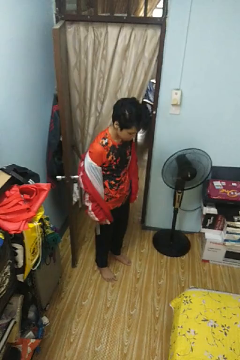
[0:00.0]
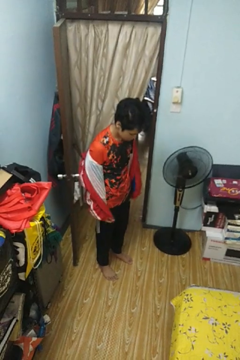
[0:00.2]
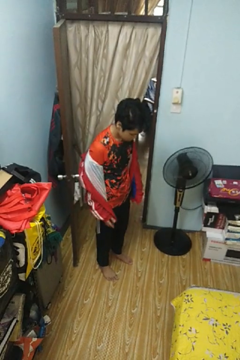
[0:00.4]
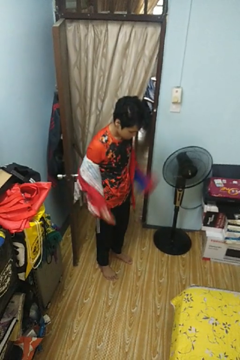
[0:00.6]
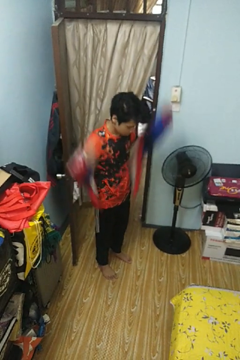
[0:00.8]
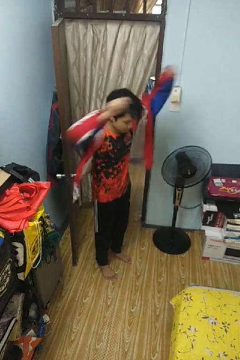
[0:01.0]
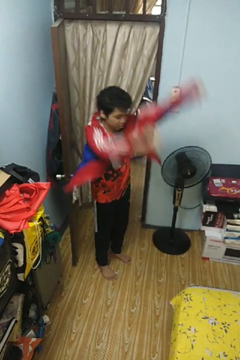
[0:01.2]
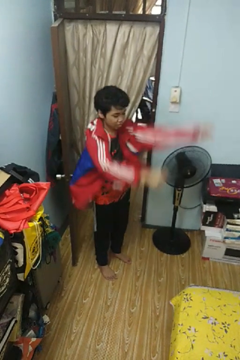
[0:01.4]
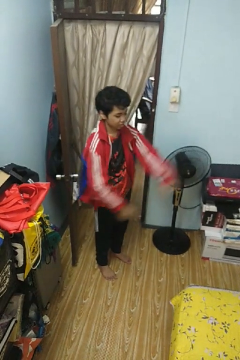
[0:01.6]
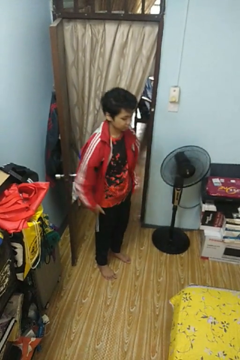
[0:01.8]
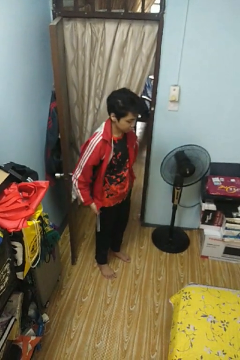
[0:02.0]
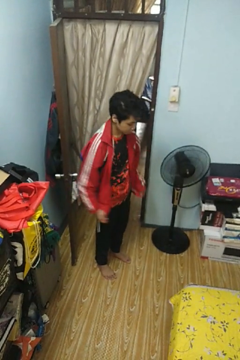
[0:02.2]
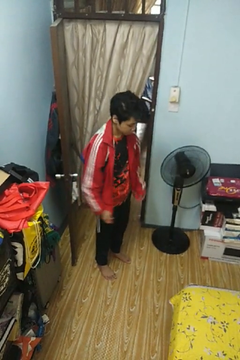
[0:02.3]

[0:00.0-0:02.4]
person puts on jacket

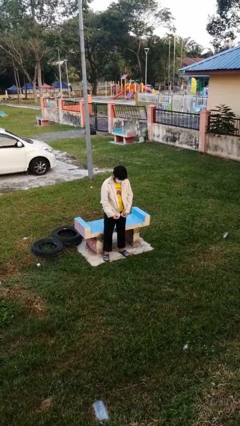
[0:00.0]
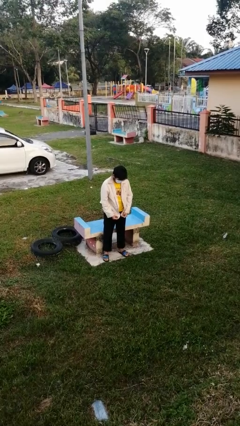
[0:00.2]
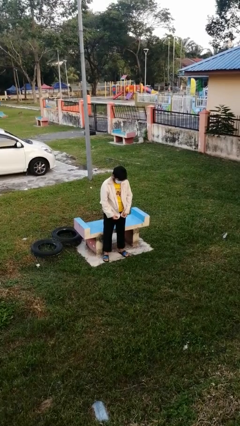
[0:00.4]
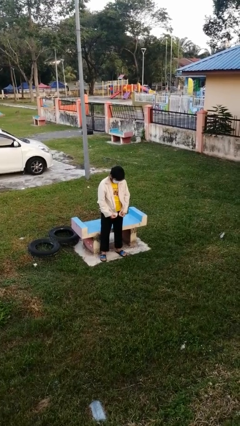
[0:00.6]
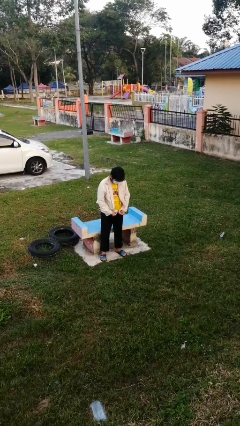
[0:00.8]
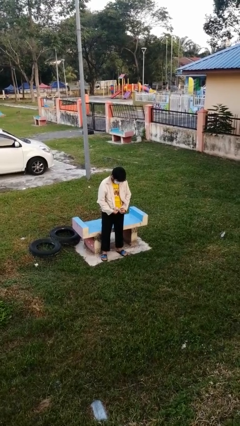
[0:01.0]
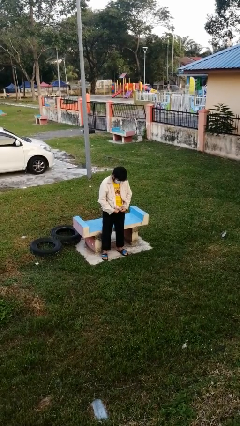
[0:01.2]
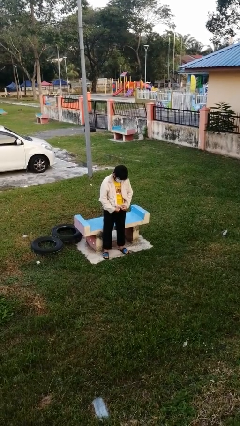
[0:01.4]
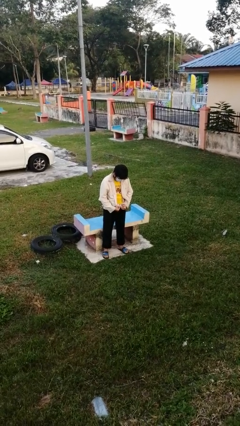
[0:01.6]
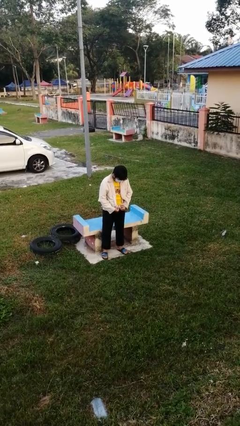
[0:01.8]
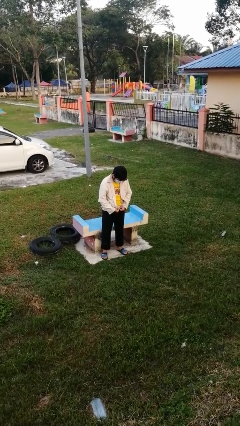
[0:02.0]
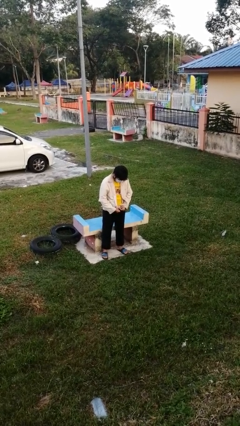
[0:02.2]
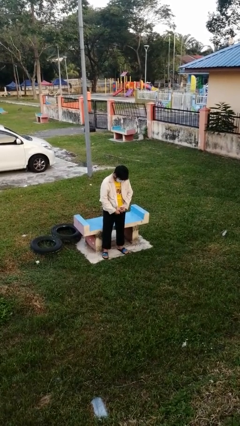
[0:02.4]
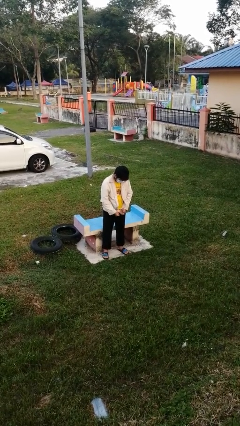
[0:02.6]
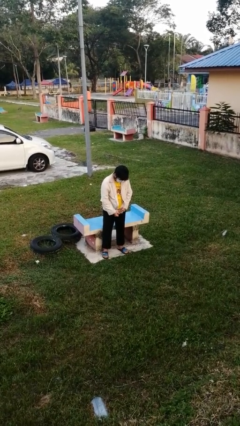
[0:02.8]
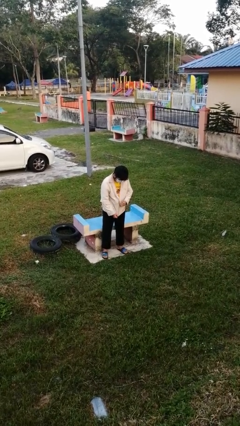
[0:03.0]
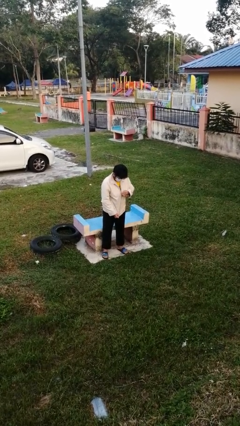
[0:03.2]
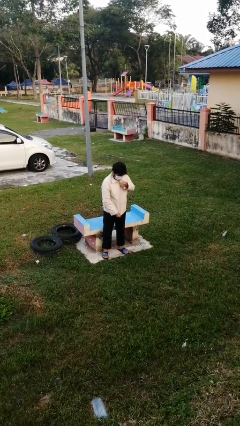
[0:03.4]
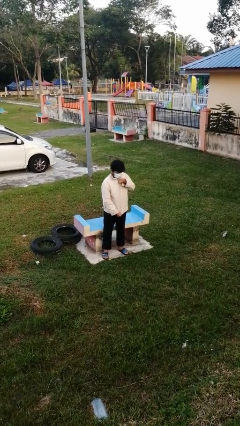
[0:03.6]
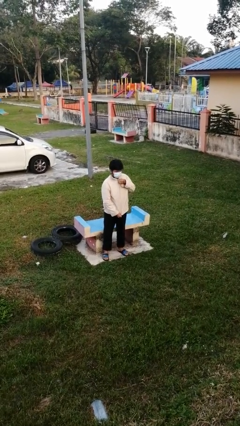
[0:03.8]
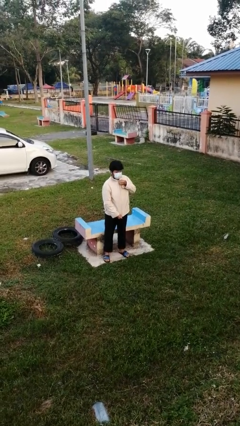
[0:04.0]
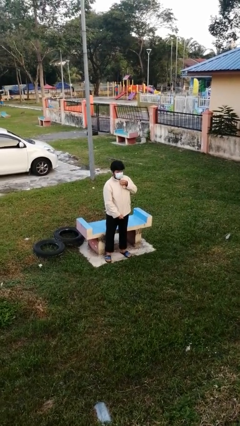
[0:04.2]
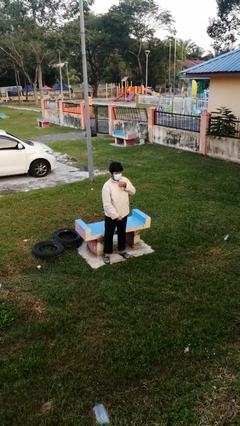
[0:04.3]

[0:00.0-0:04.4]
person zips up jacket

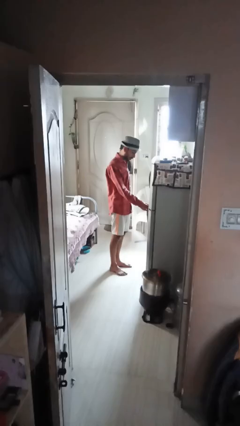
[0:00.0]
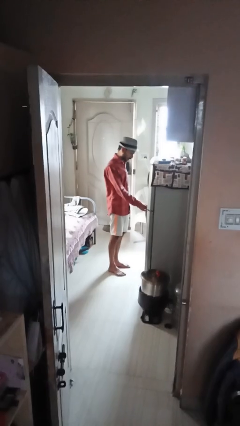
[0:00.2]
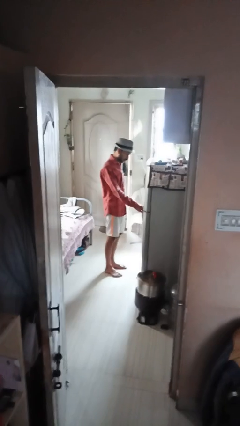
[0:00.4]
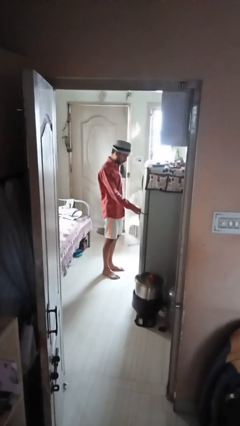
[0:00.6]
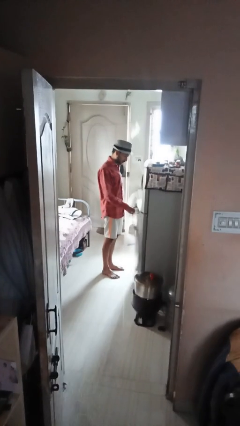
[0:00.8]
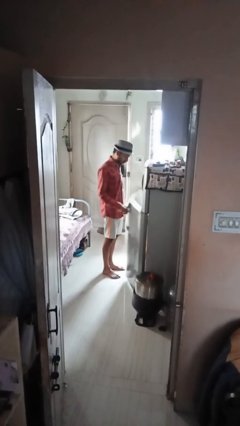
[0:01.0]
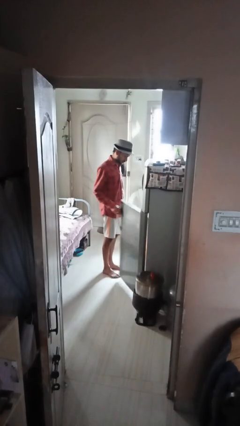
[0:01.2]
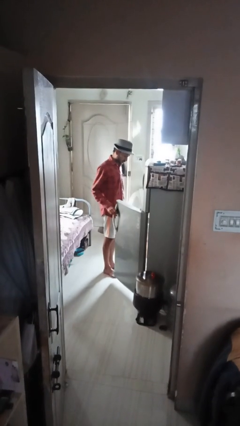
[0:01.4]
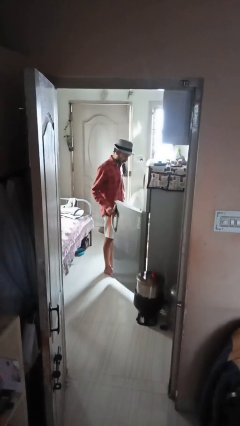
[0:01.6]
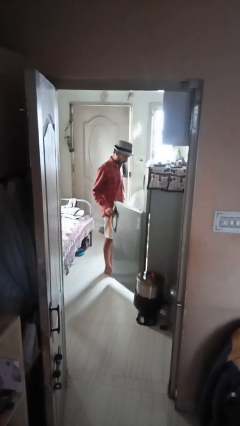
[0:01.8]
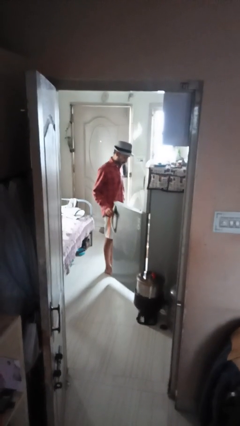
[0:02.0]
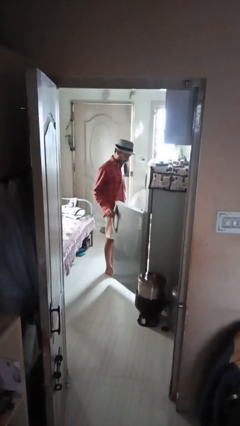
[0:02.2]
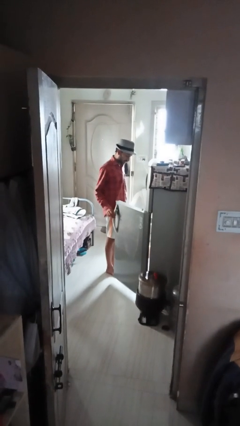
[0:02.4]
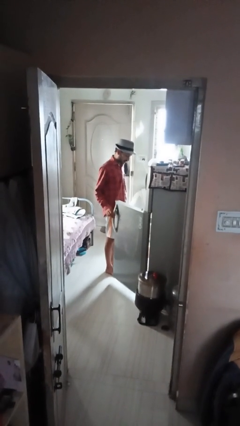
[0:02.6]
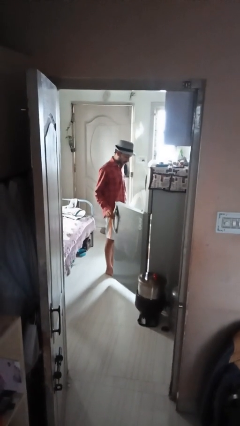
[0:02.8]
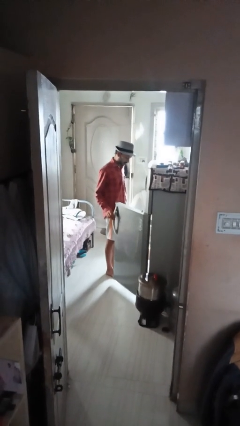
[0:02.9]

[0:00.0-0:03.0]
person opens refrigerator

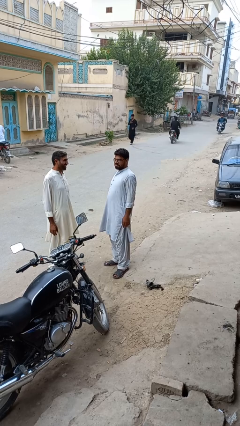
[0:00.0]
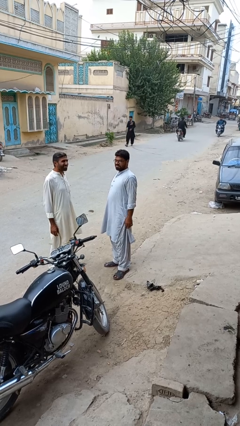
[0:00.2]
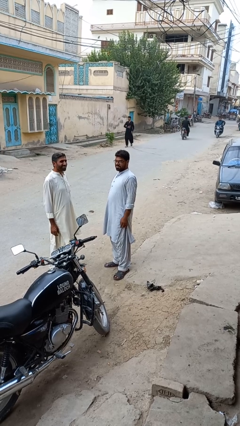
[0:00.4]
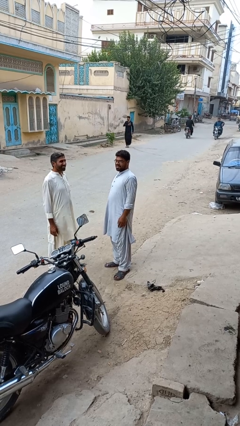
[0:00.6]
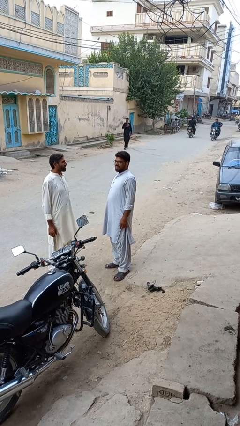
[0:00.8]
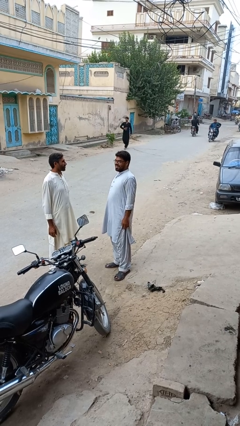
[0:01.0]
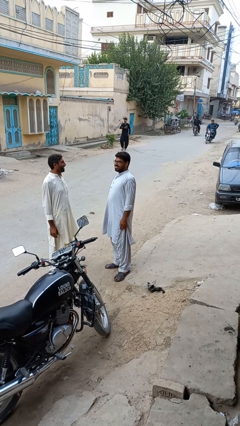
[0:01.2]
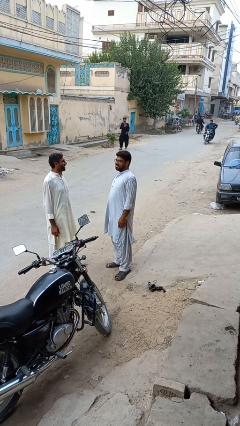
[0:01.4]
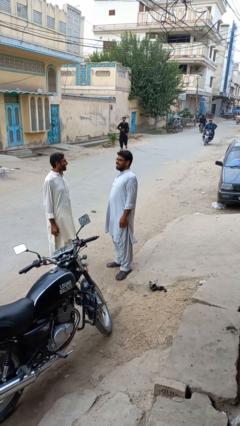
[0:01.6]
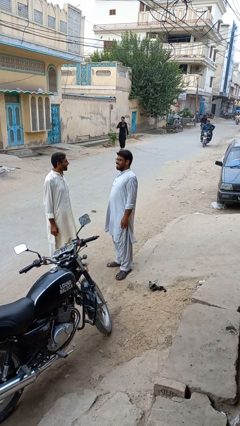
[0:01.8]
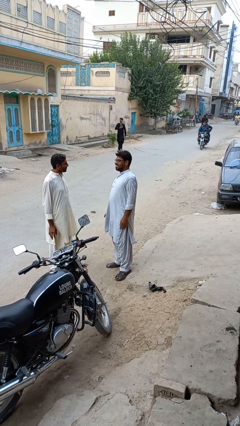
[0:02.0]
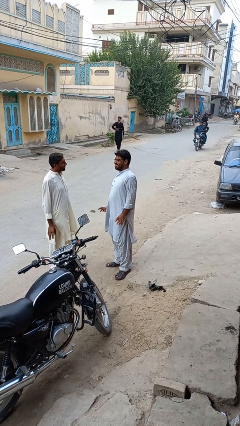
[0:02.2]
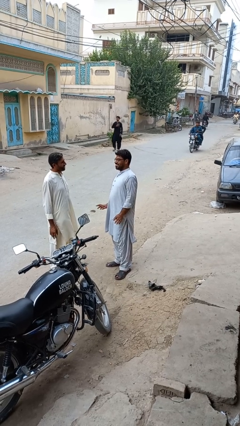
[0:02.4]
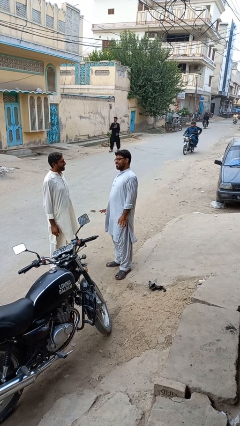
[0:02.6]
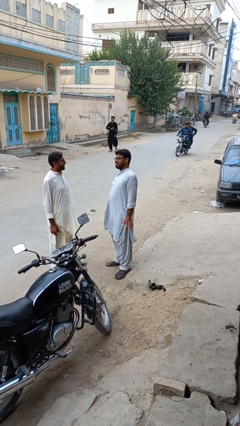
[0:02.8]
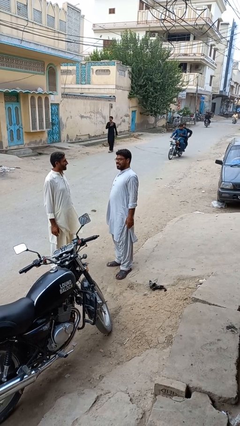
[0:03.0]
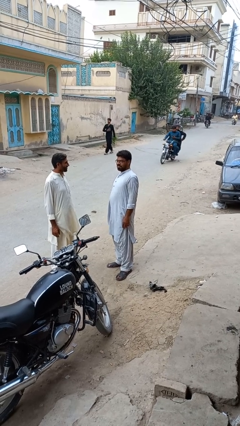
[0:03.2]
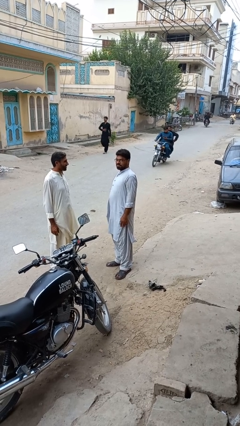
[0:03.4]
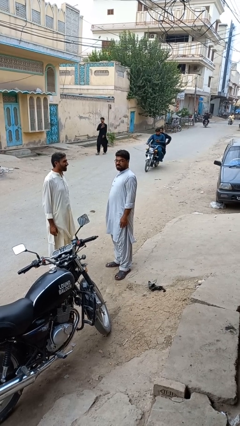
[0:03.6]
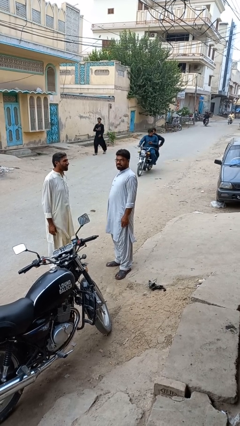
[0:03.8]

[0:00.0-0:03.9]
person laughs with person

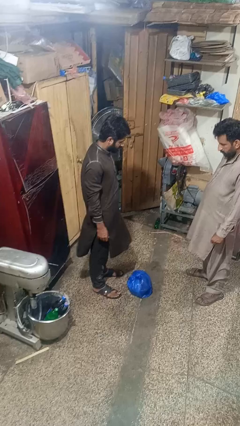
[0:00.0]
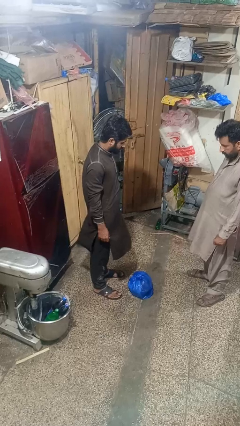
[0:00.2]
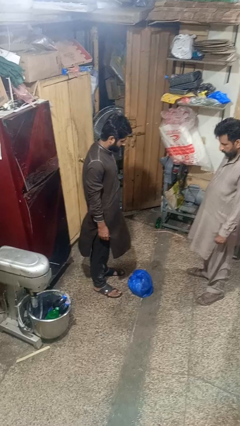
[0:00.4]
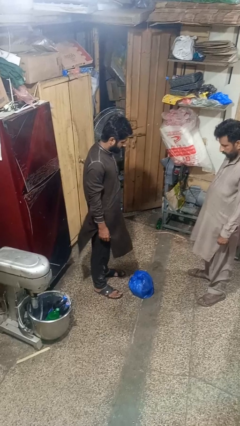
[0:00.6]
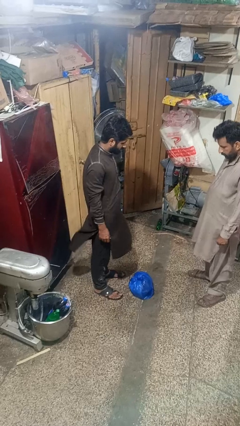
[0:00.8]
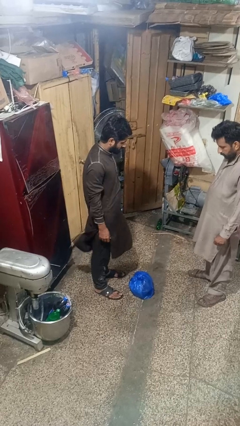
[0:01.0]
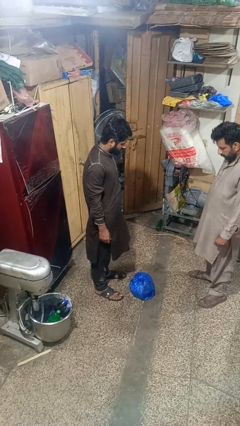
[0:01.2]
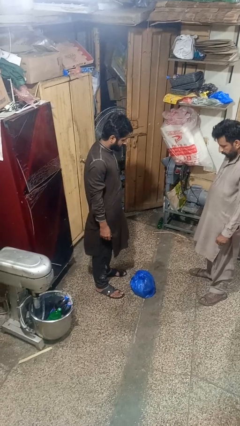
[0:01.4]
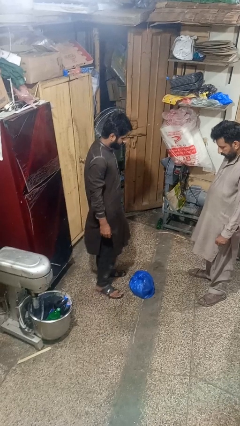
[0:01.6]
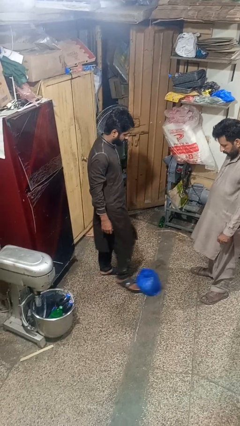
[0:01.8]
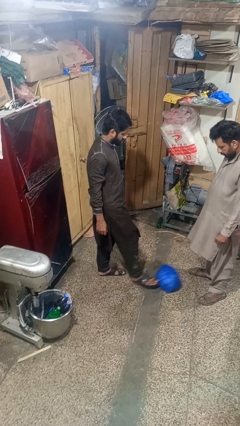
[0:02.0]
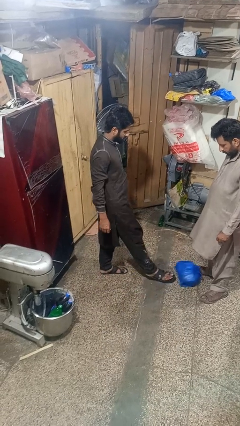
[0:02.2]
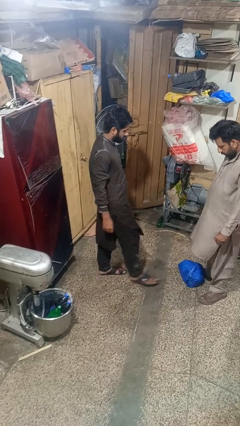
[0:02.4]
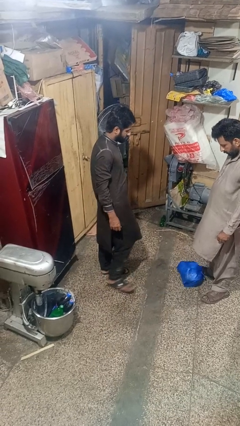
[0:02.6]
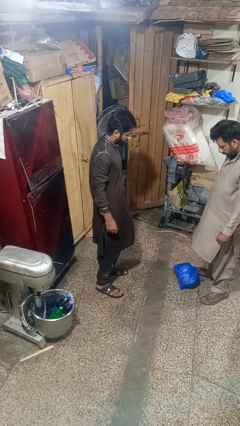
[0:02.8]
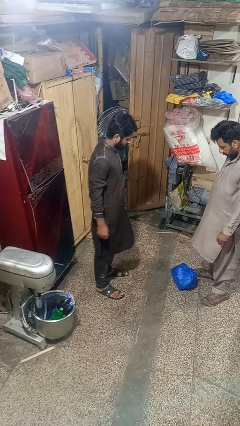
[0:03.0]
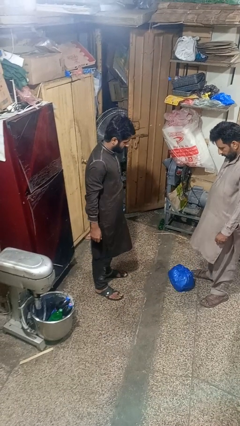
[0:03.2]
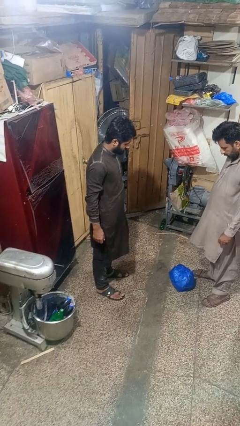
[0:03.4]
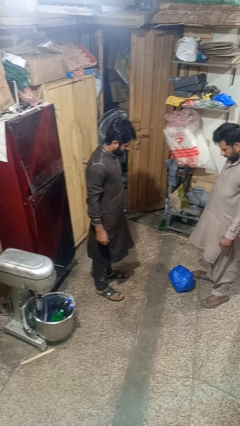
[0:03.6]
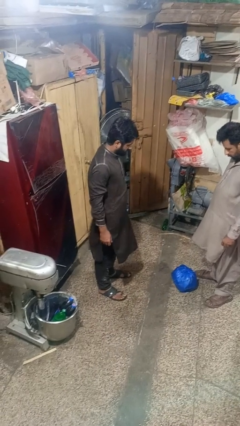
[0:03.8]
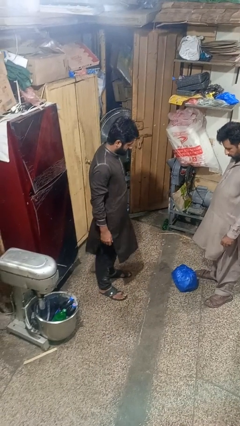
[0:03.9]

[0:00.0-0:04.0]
person kicks object to person

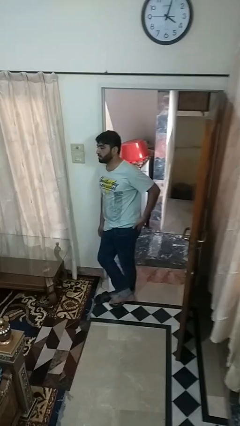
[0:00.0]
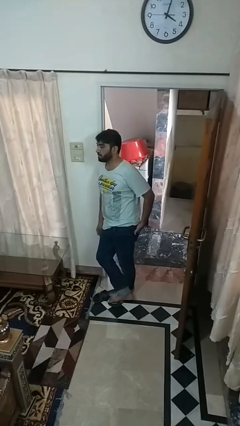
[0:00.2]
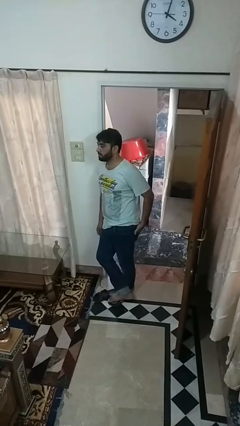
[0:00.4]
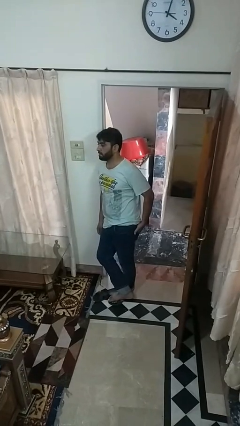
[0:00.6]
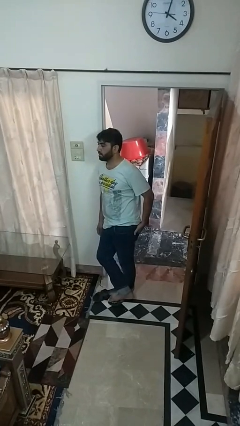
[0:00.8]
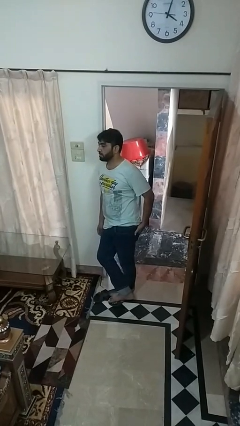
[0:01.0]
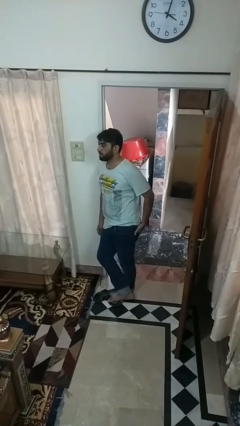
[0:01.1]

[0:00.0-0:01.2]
person puts hands in back pockets
